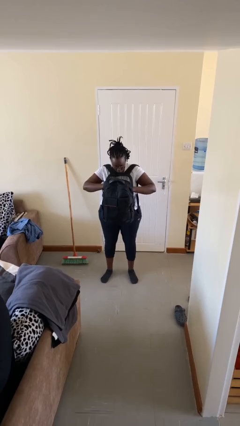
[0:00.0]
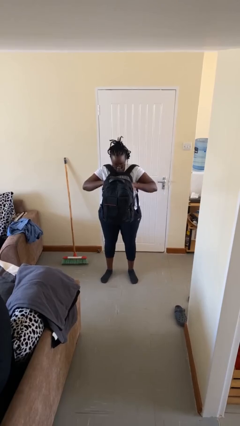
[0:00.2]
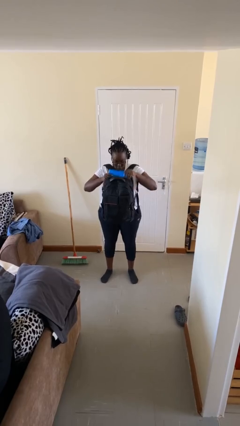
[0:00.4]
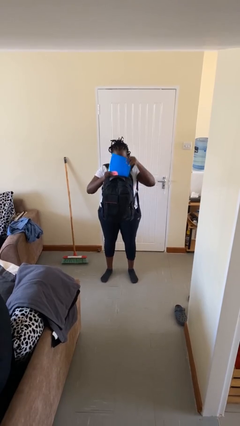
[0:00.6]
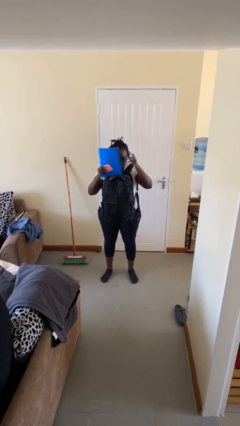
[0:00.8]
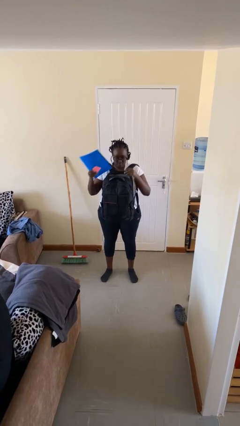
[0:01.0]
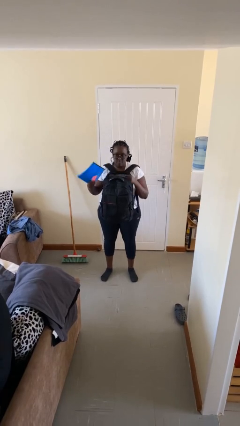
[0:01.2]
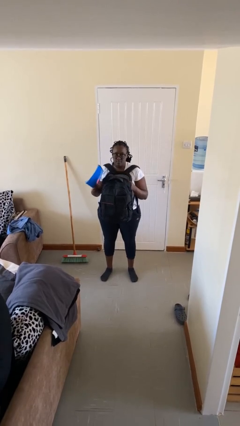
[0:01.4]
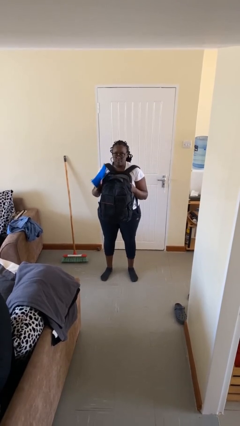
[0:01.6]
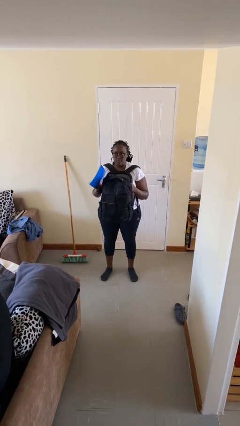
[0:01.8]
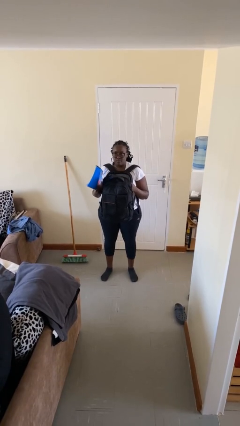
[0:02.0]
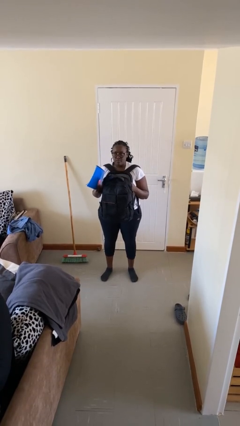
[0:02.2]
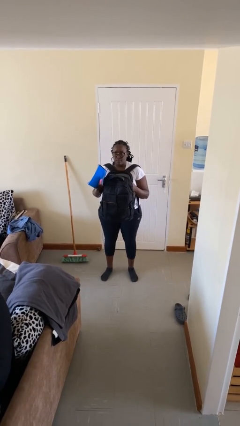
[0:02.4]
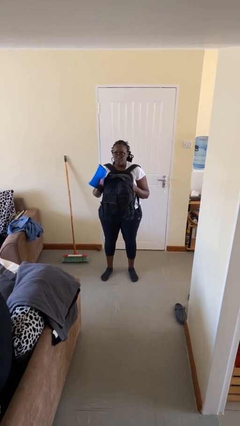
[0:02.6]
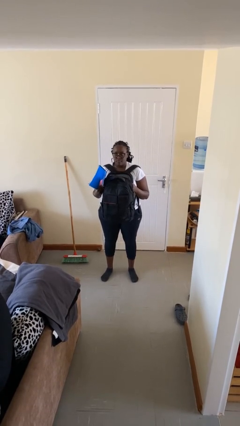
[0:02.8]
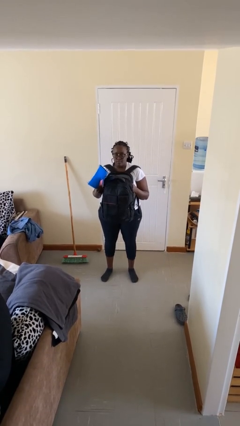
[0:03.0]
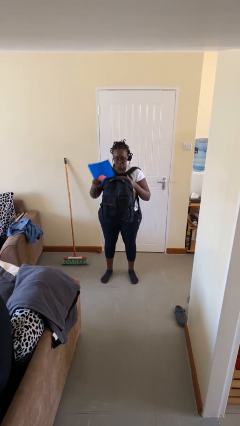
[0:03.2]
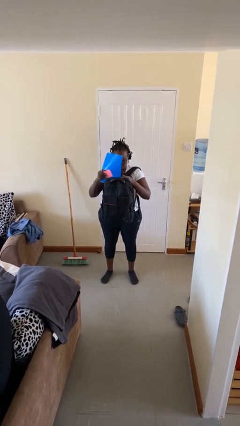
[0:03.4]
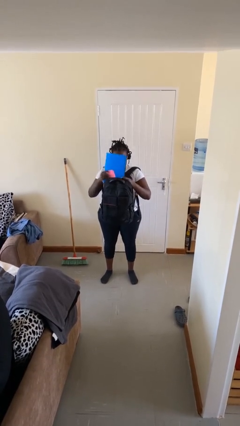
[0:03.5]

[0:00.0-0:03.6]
person takes object from backpack

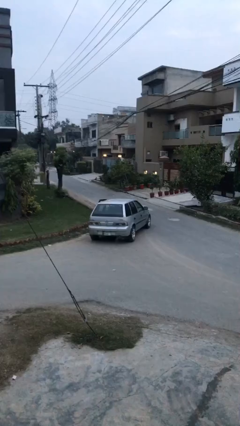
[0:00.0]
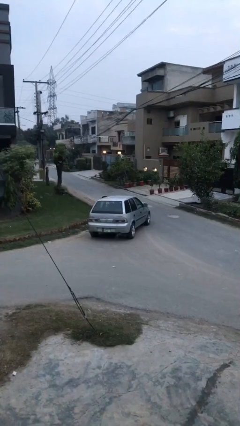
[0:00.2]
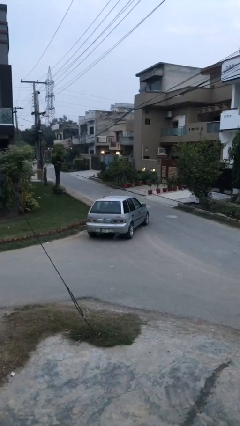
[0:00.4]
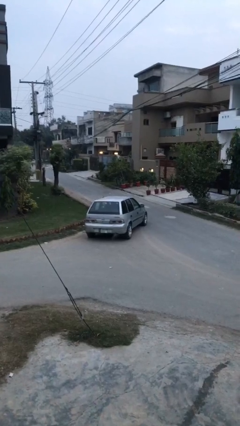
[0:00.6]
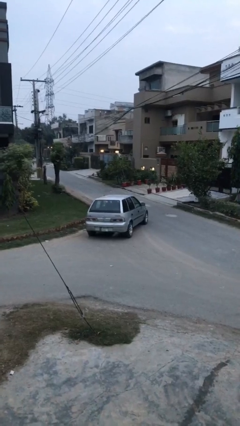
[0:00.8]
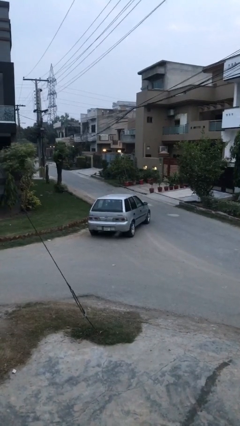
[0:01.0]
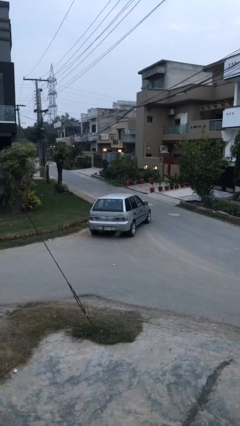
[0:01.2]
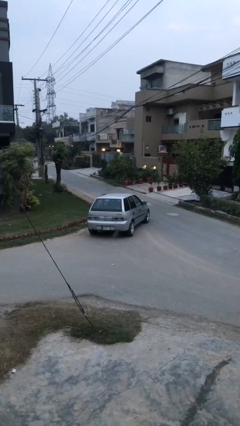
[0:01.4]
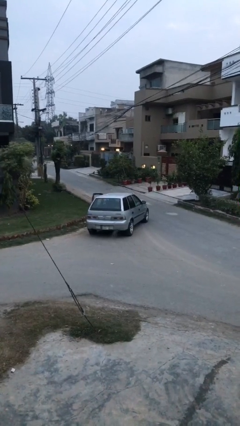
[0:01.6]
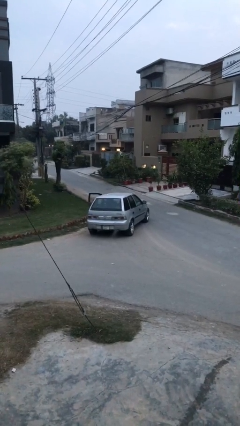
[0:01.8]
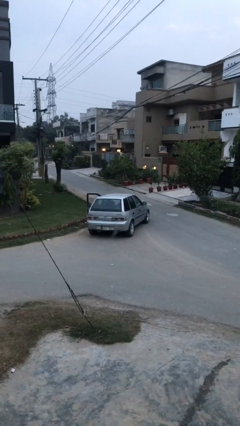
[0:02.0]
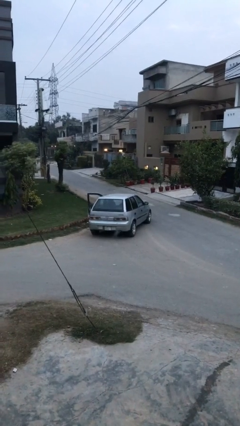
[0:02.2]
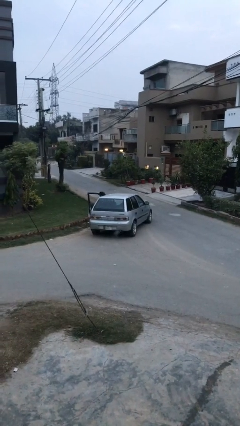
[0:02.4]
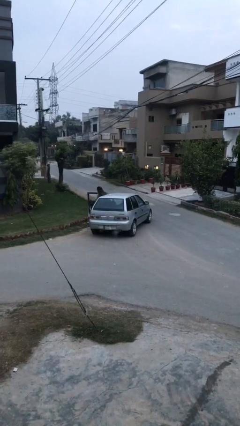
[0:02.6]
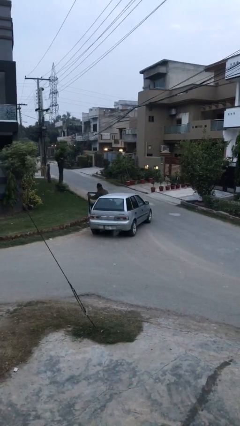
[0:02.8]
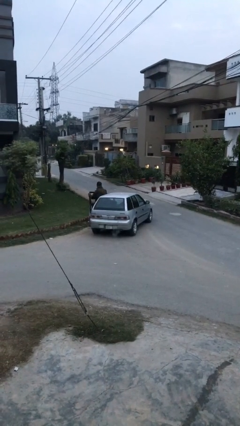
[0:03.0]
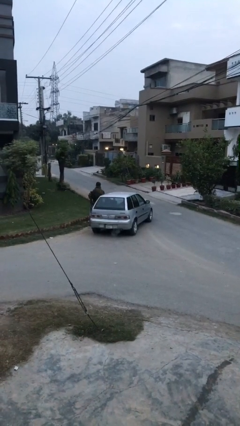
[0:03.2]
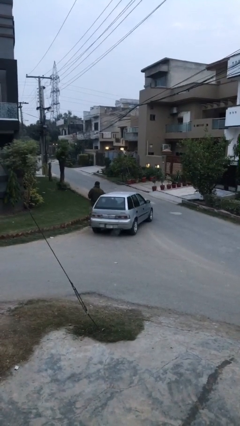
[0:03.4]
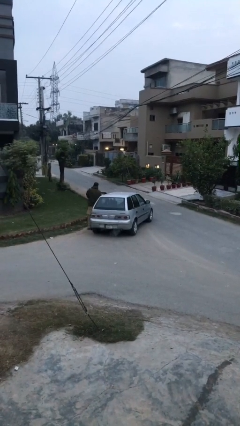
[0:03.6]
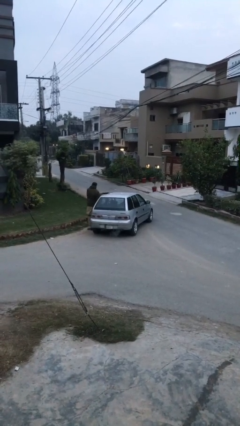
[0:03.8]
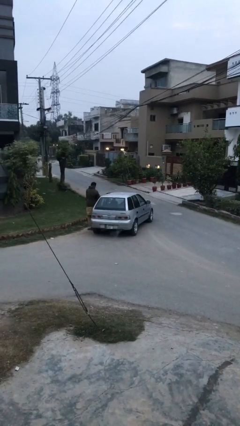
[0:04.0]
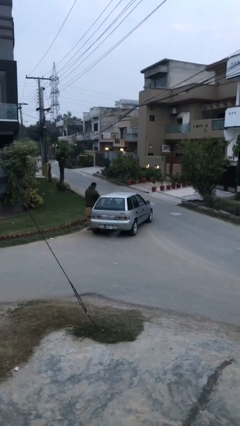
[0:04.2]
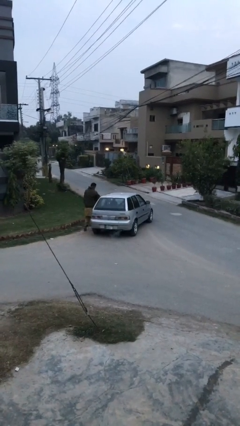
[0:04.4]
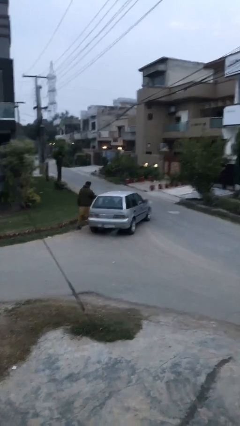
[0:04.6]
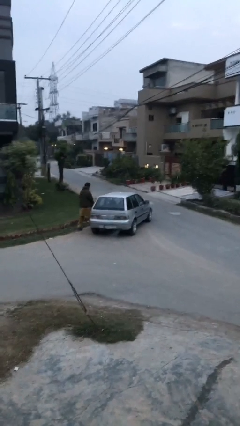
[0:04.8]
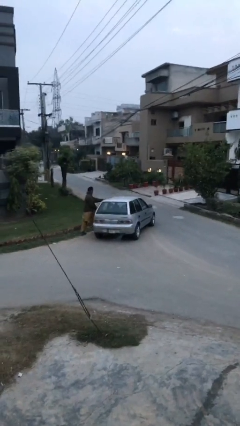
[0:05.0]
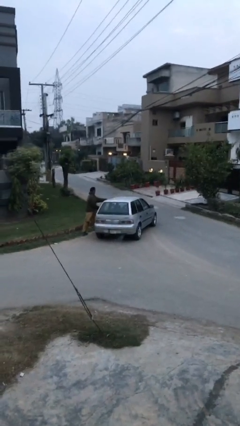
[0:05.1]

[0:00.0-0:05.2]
car drops off person

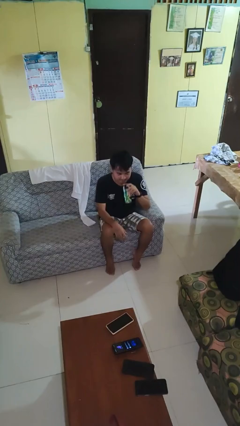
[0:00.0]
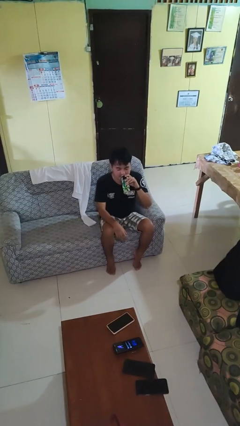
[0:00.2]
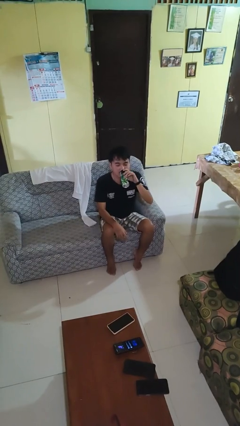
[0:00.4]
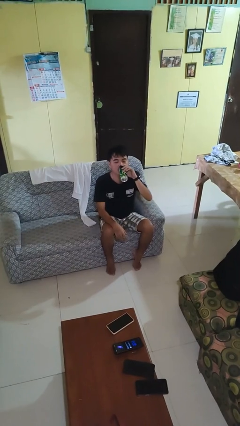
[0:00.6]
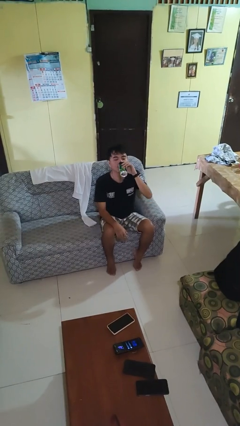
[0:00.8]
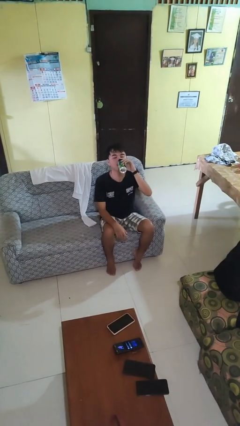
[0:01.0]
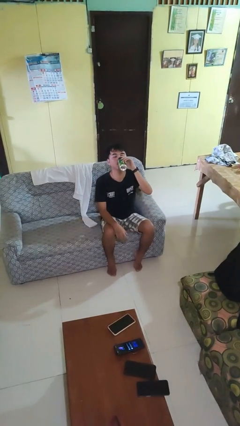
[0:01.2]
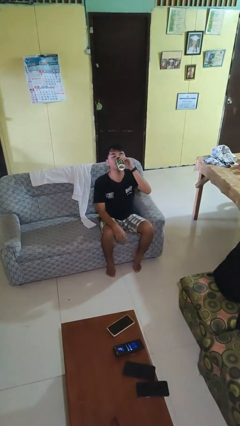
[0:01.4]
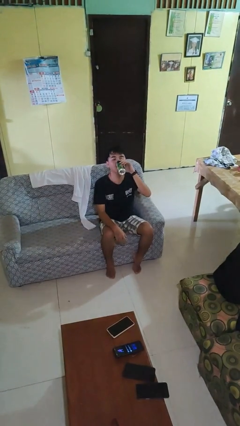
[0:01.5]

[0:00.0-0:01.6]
person drinks from beverage can

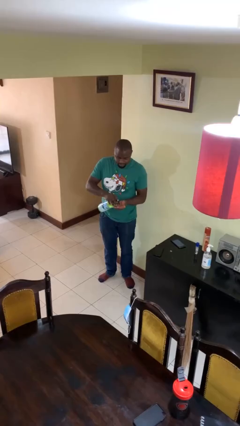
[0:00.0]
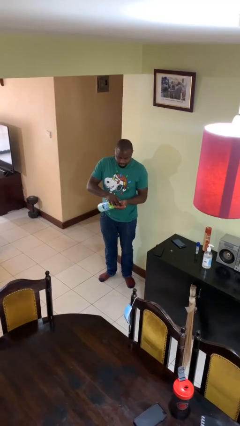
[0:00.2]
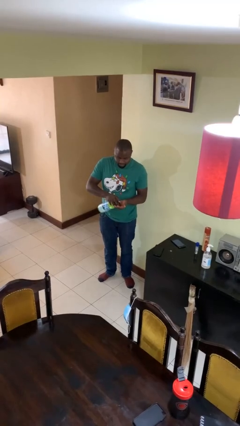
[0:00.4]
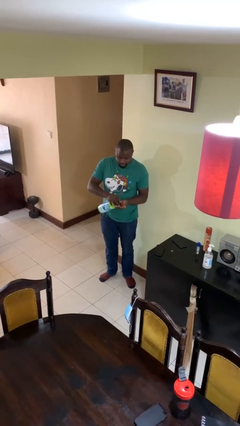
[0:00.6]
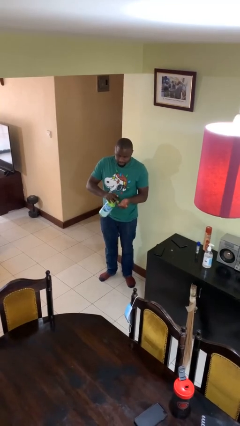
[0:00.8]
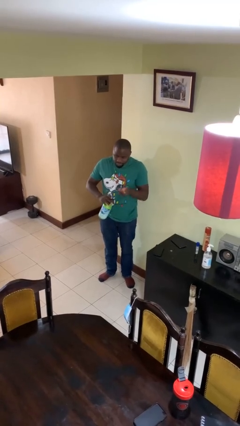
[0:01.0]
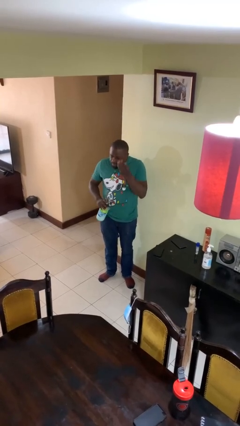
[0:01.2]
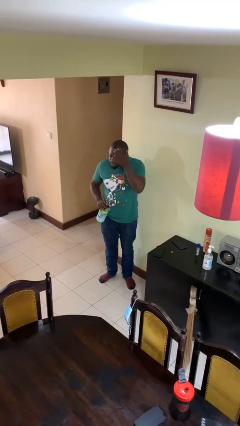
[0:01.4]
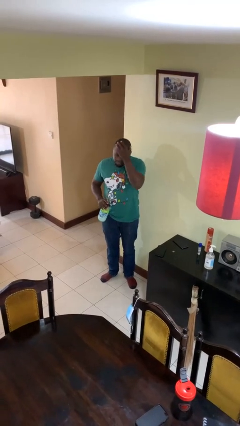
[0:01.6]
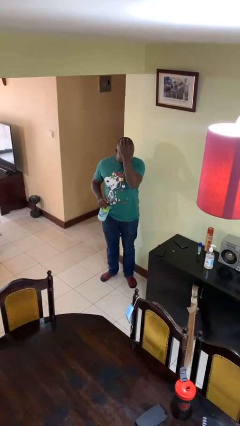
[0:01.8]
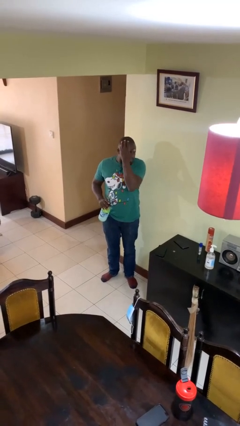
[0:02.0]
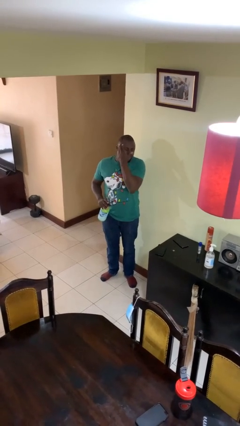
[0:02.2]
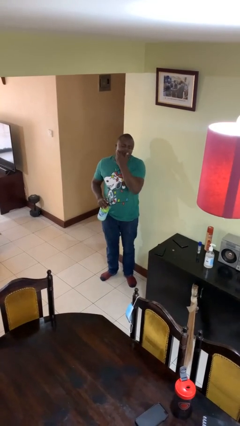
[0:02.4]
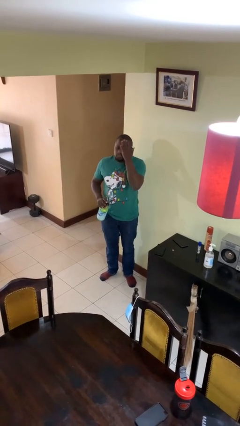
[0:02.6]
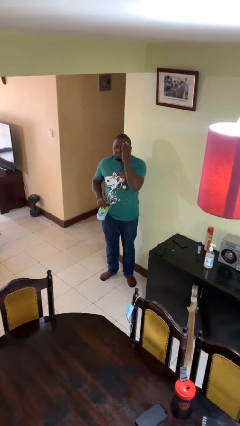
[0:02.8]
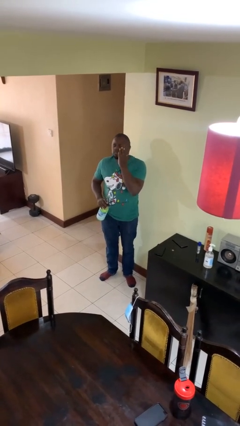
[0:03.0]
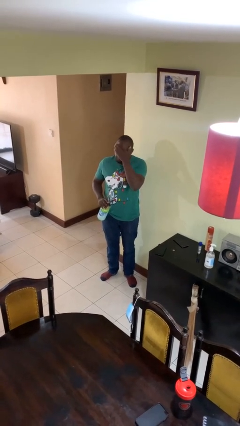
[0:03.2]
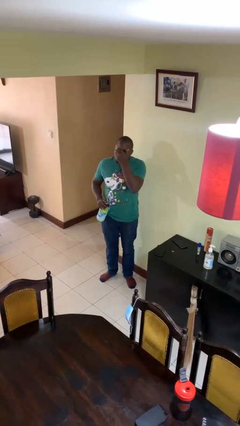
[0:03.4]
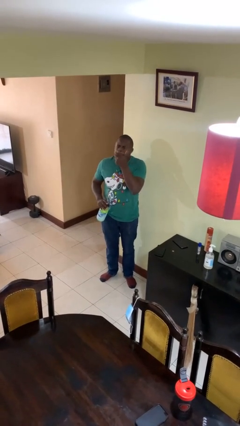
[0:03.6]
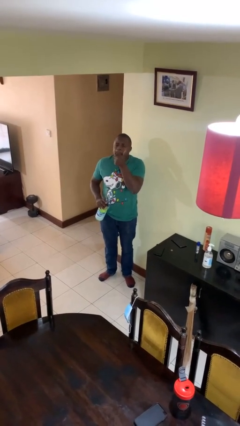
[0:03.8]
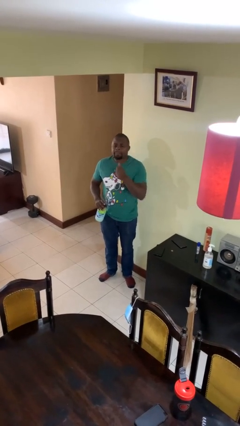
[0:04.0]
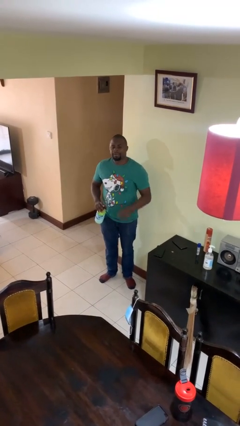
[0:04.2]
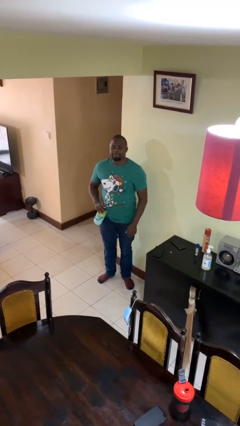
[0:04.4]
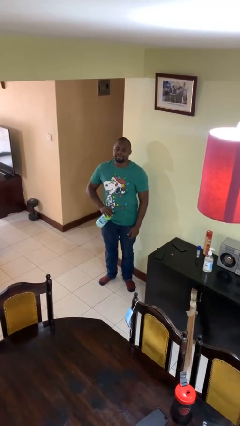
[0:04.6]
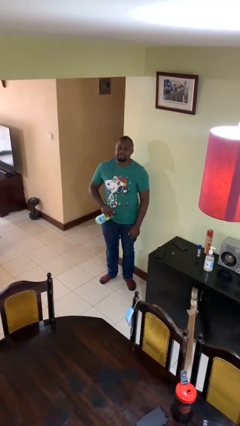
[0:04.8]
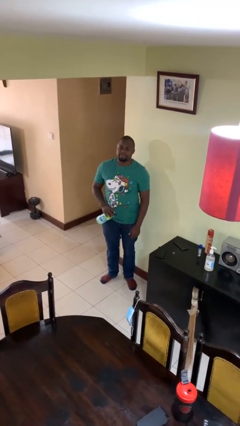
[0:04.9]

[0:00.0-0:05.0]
person applies facial moisturizer

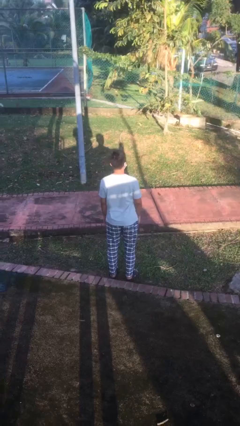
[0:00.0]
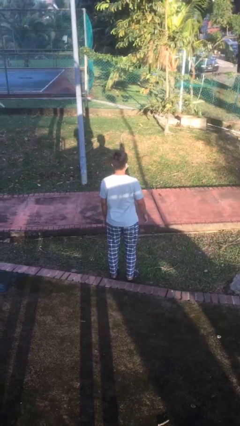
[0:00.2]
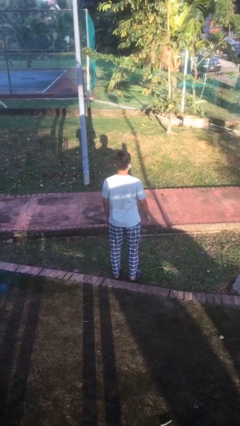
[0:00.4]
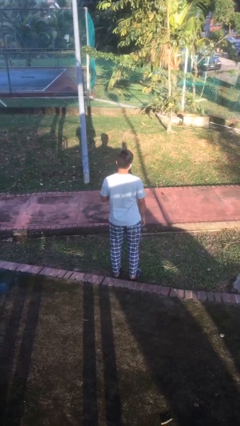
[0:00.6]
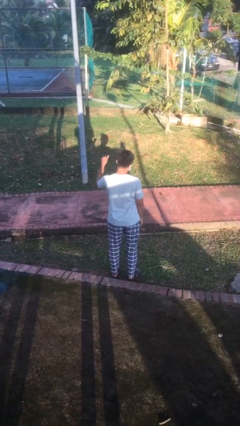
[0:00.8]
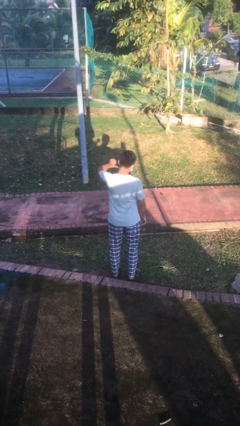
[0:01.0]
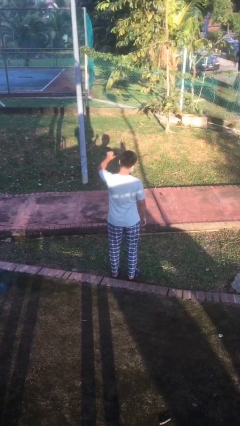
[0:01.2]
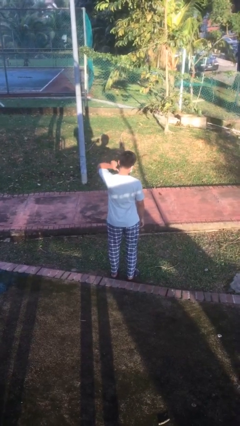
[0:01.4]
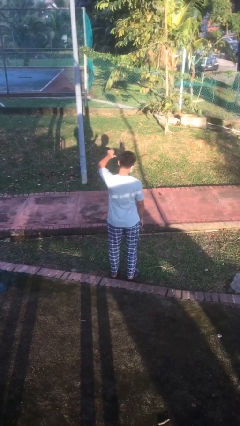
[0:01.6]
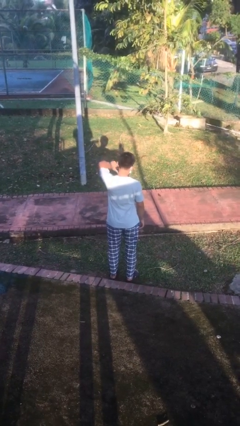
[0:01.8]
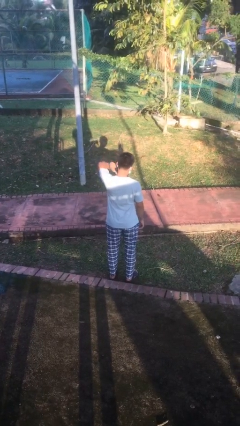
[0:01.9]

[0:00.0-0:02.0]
person gestures behind me
